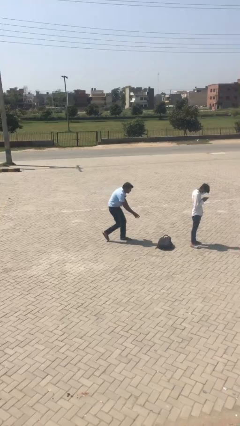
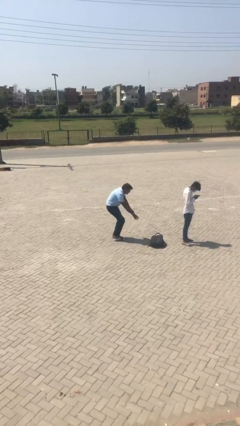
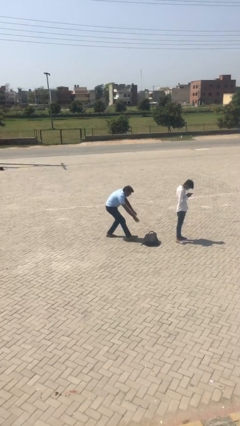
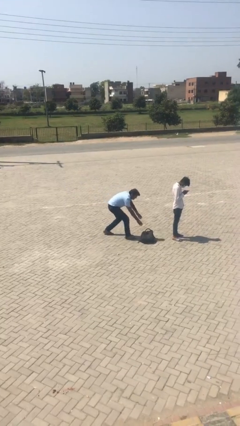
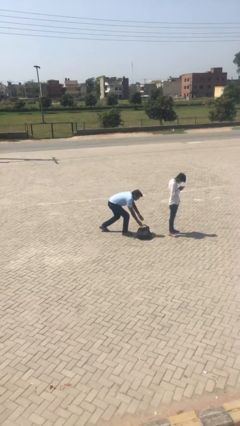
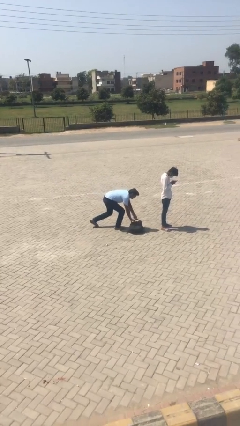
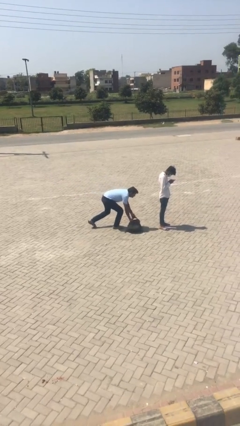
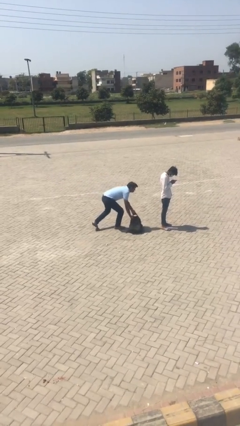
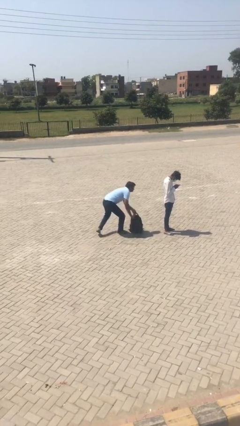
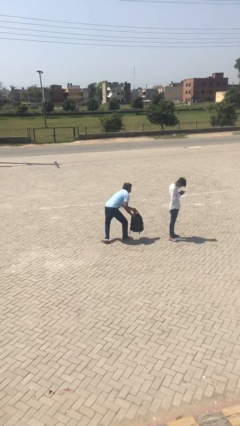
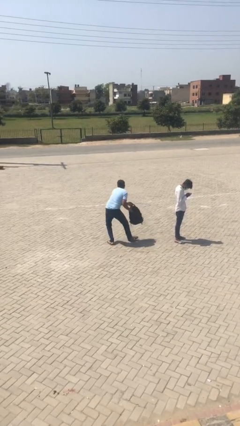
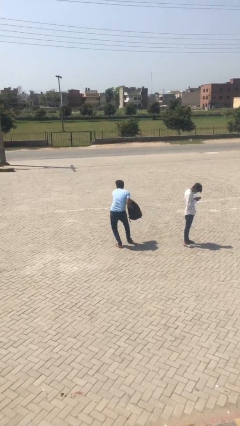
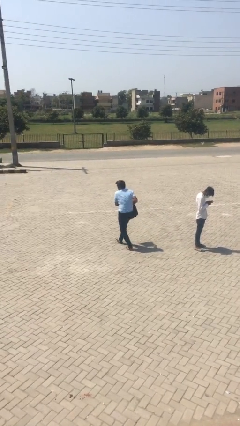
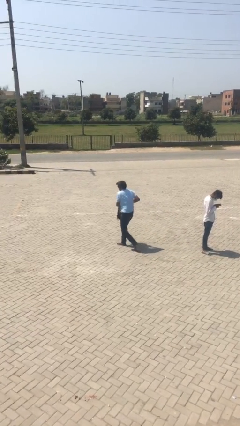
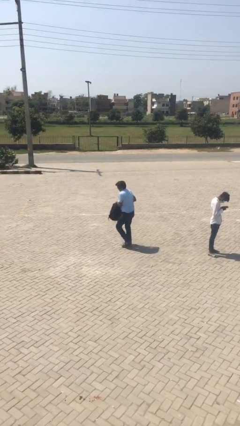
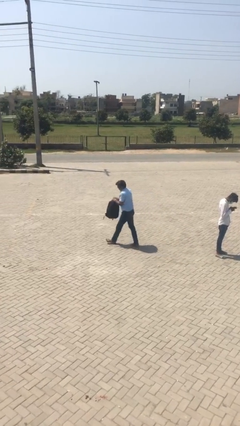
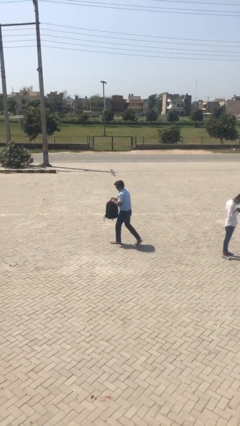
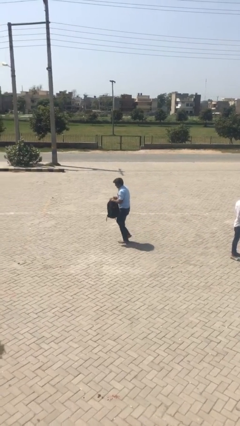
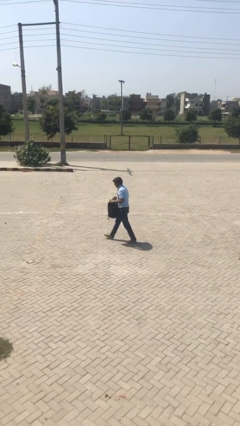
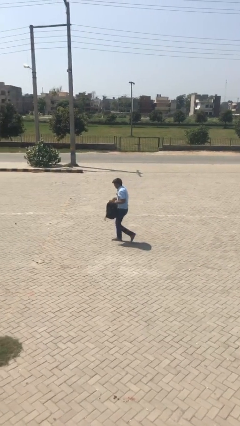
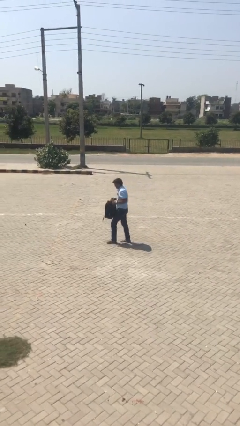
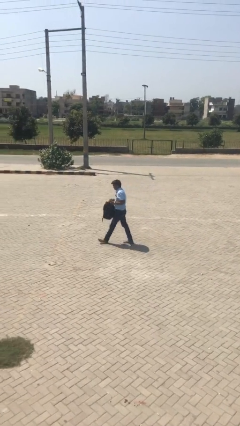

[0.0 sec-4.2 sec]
person steals object from person

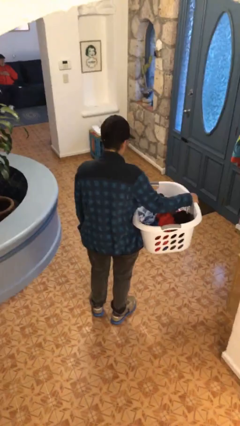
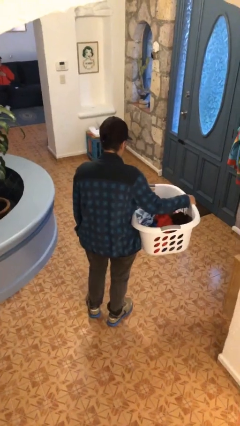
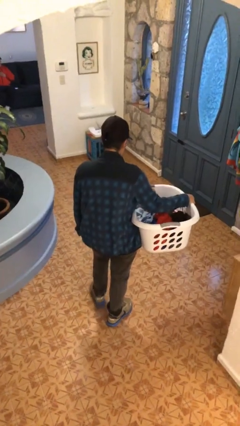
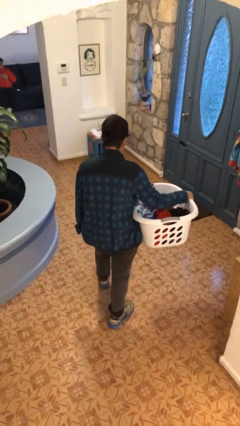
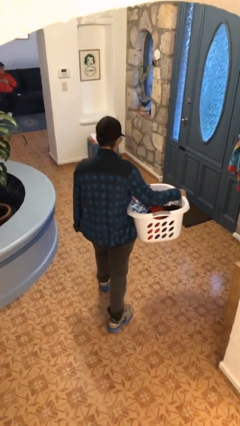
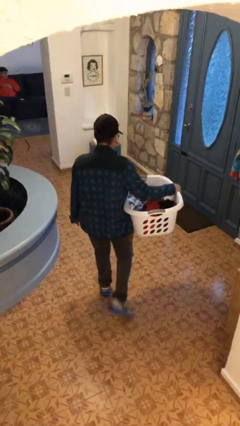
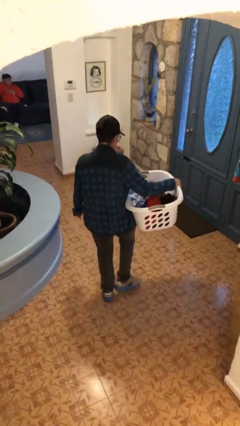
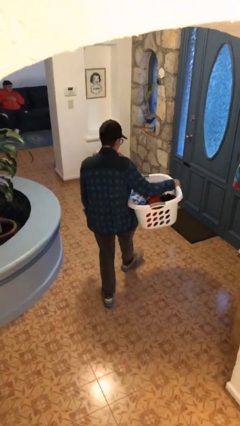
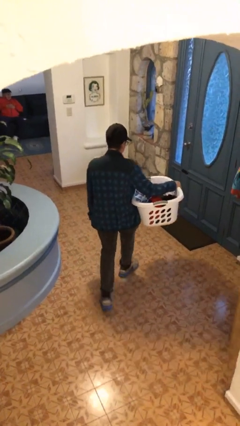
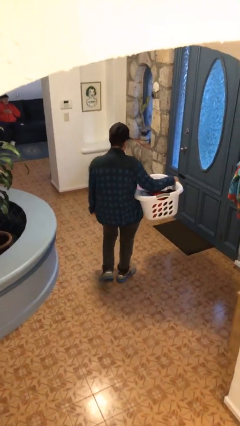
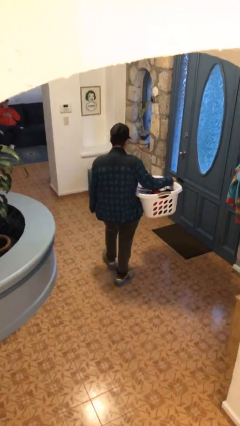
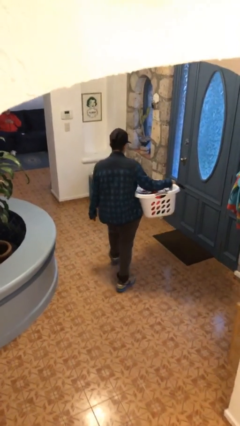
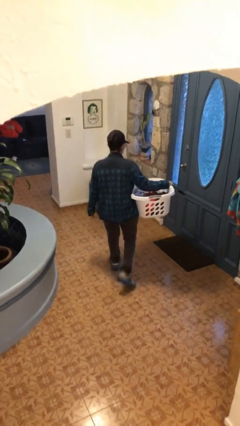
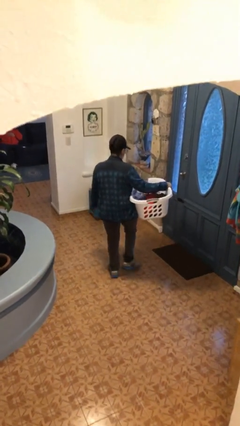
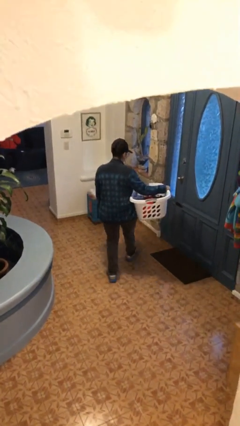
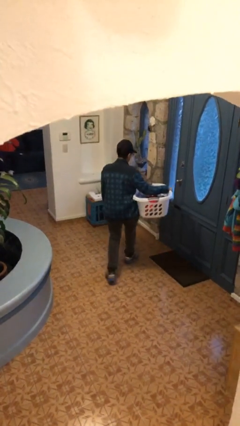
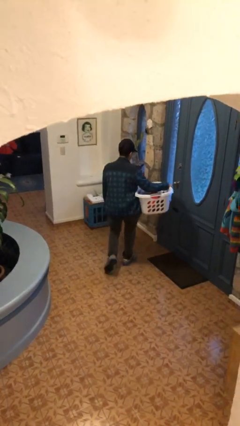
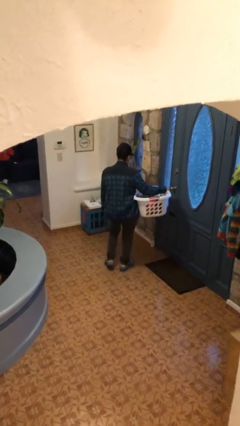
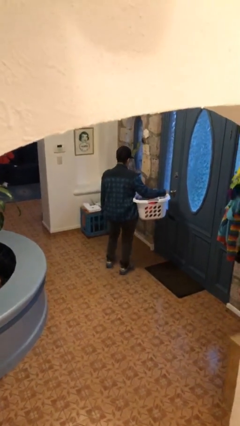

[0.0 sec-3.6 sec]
person carries laundry basket

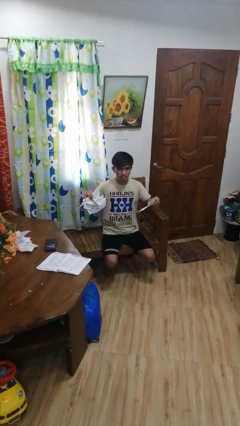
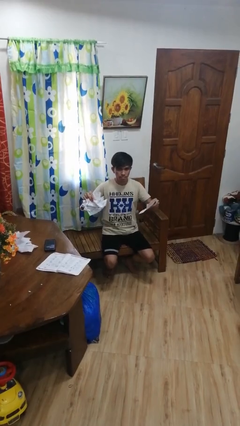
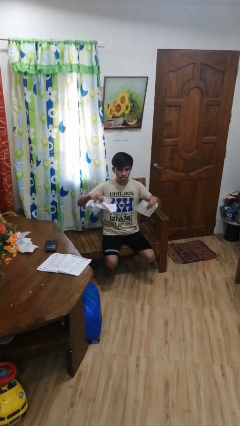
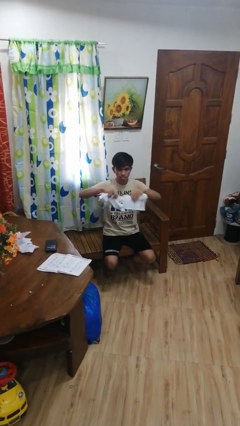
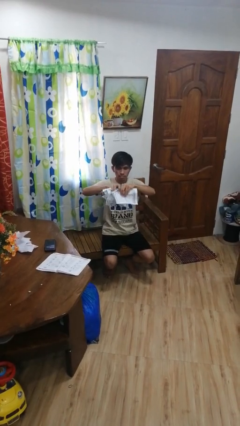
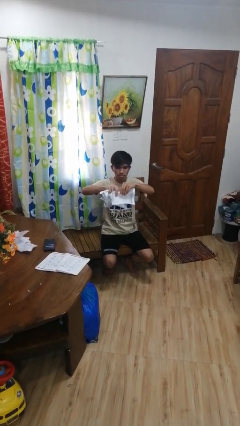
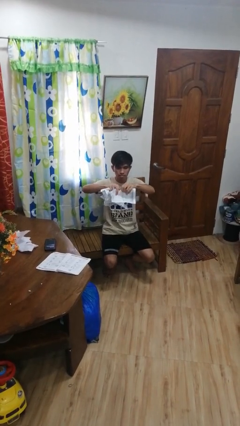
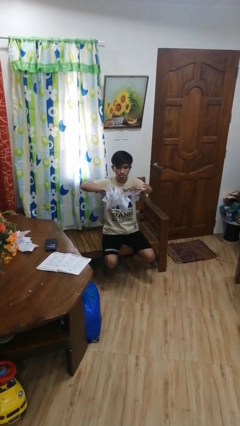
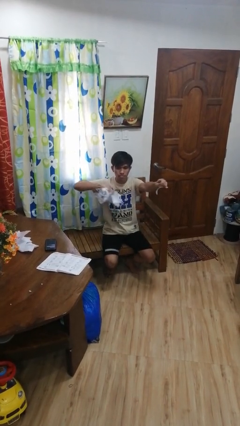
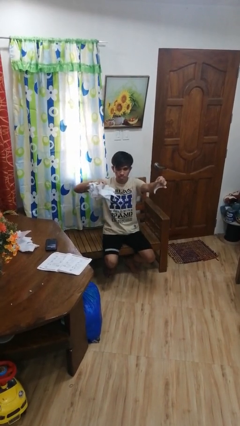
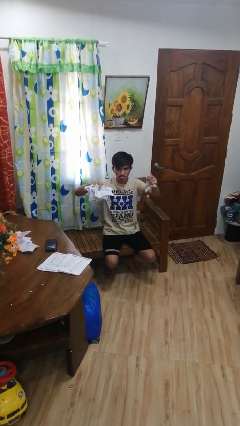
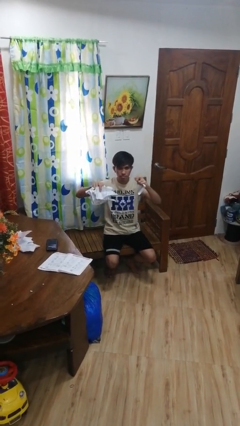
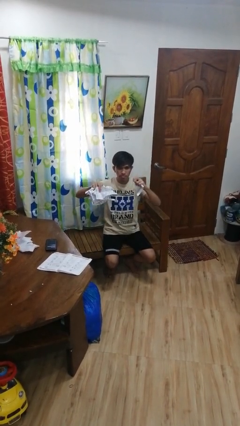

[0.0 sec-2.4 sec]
person tears paper

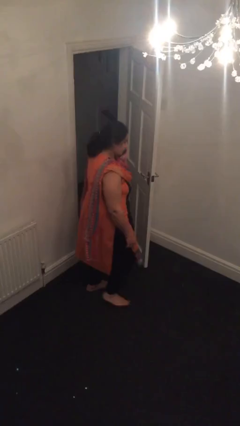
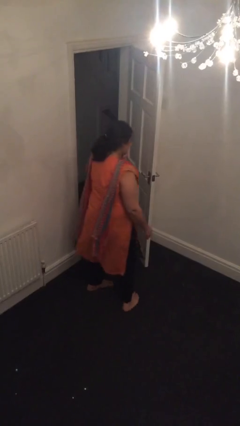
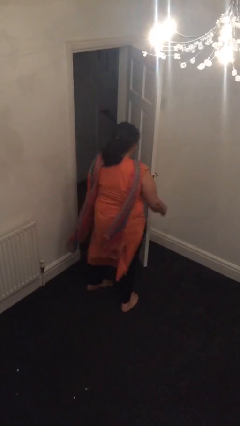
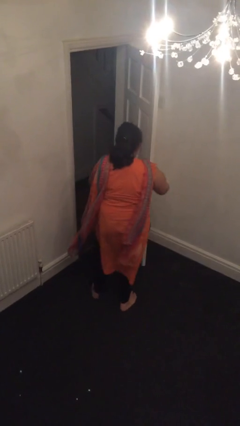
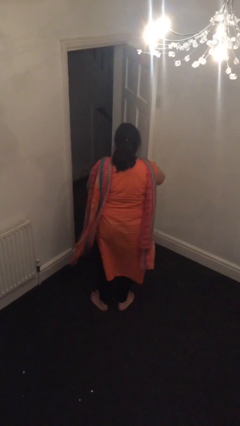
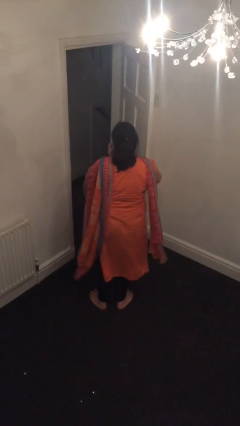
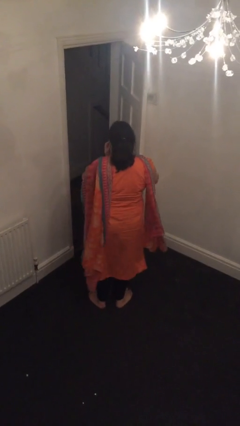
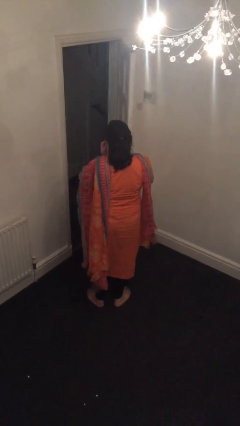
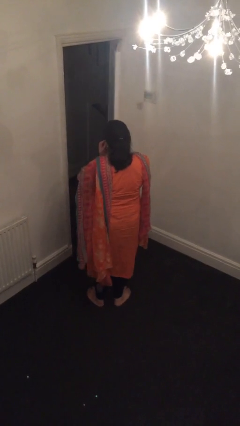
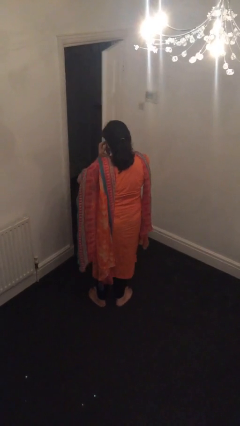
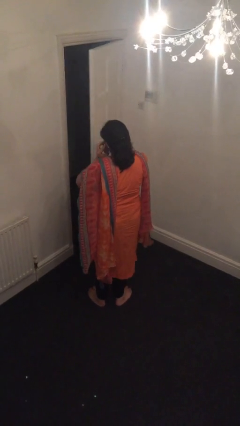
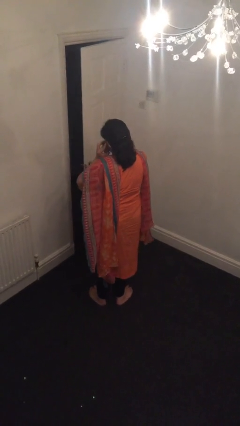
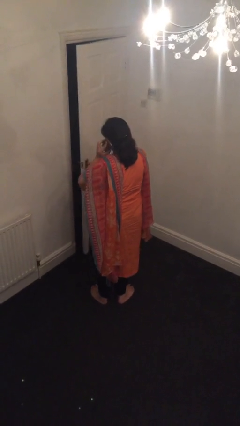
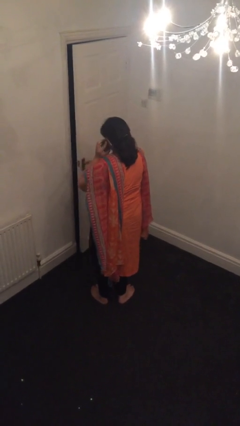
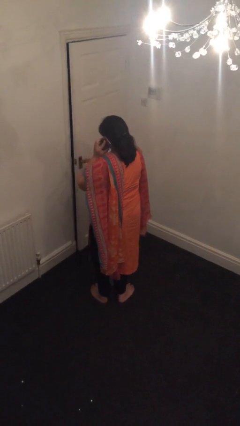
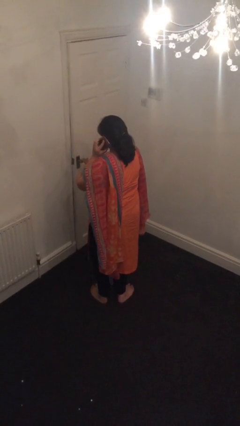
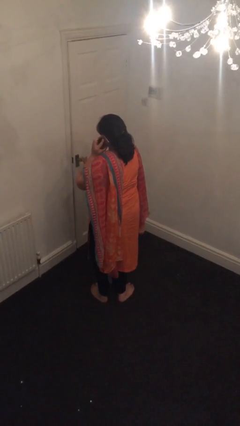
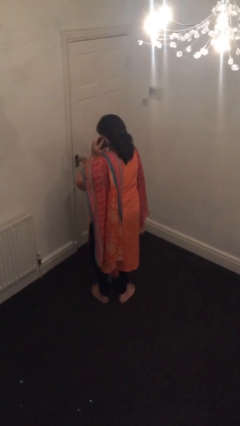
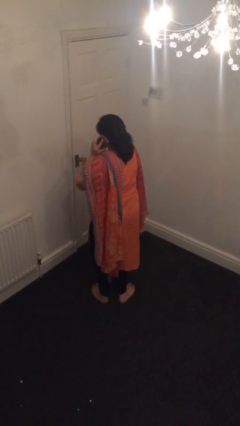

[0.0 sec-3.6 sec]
person closes facility door

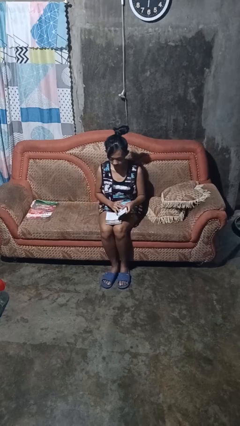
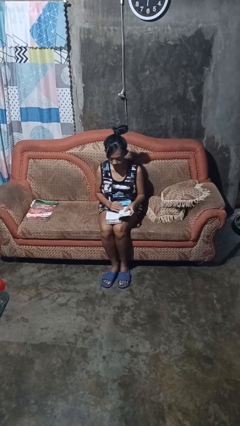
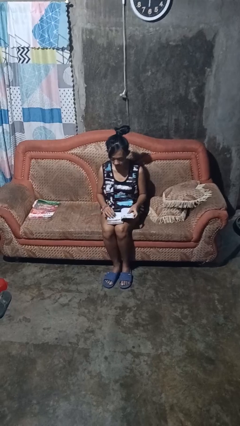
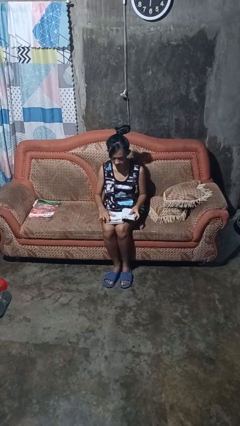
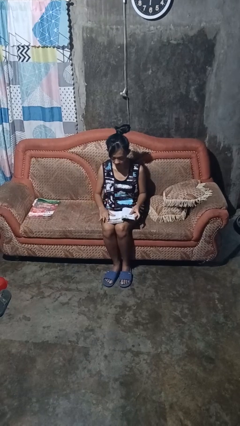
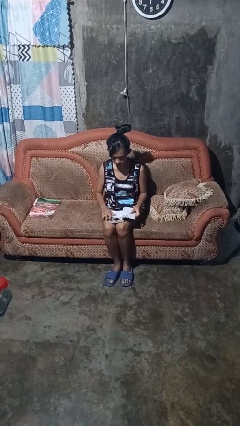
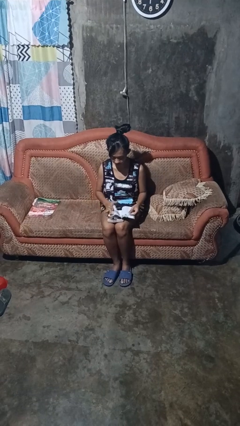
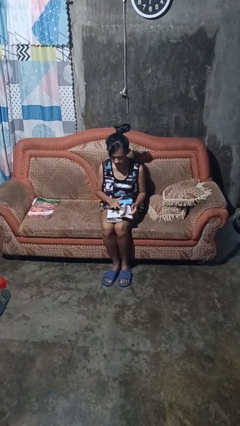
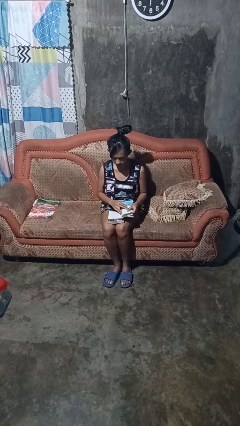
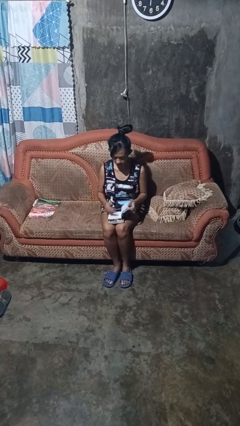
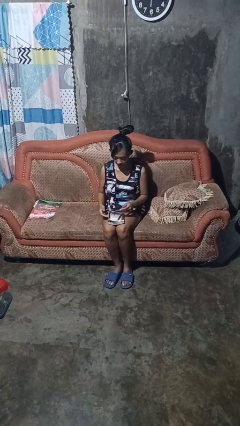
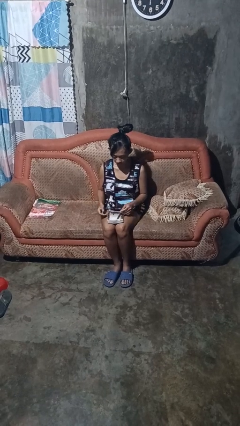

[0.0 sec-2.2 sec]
person reads book

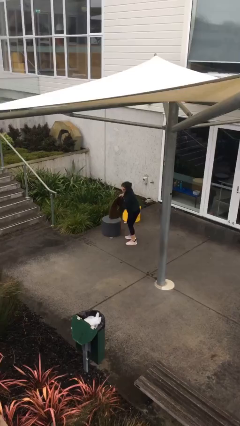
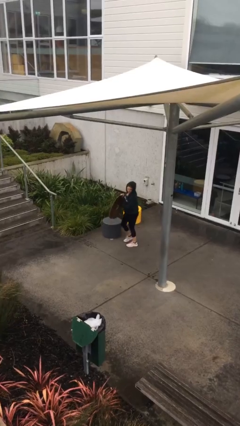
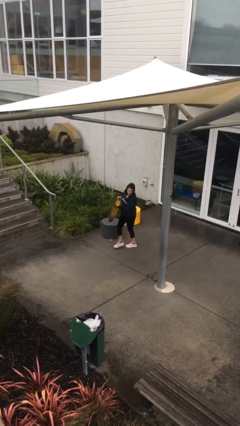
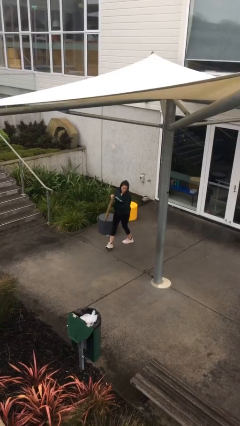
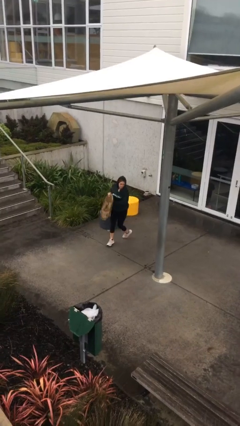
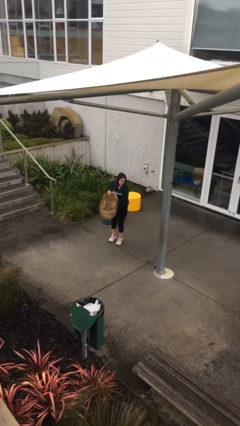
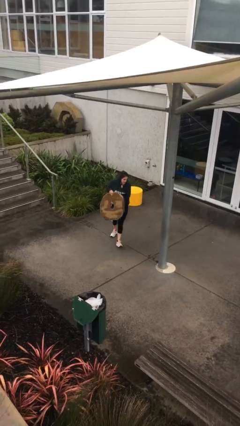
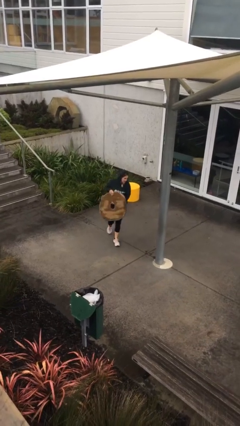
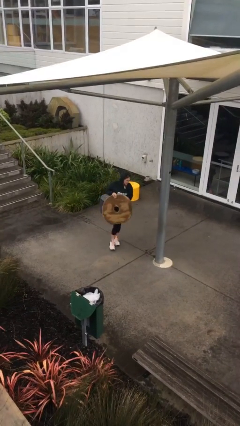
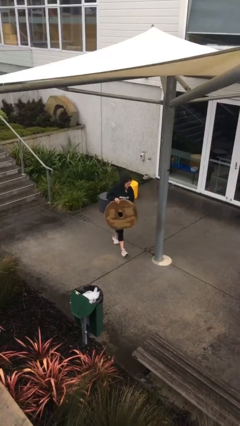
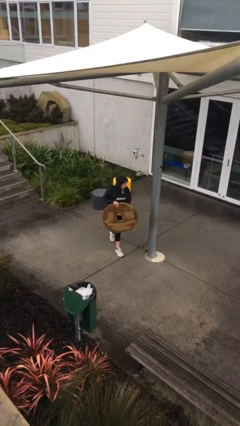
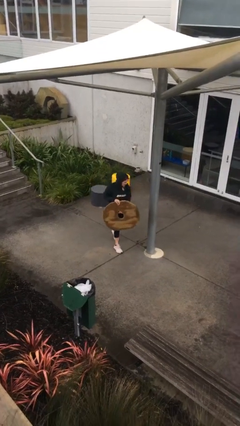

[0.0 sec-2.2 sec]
person carries heavy object
